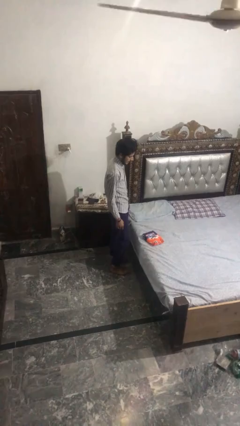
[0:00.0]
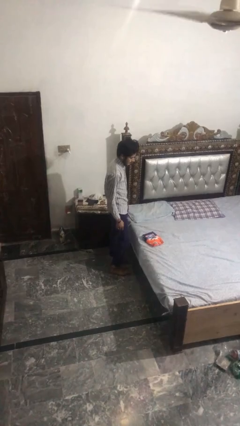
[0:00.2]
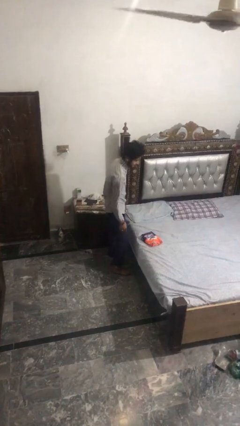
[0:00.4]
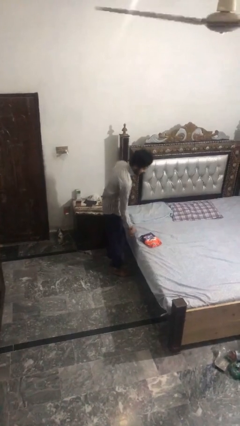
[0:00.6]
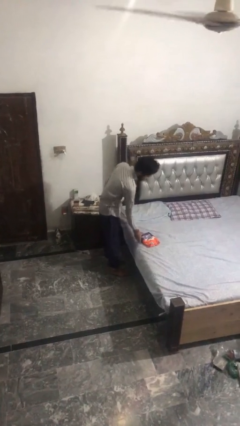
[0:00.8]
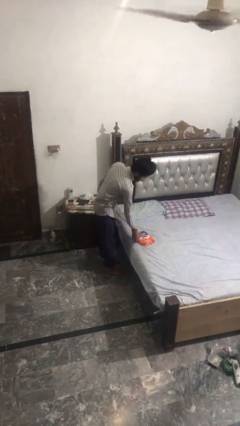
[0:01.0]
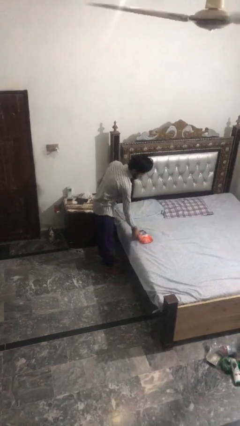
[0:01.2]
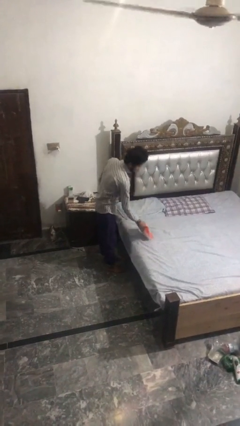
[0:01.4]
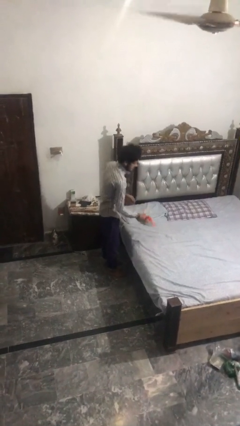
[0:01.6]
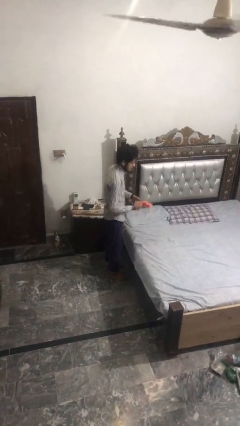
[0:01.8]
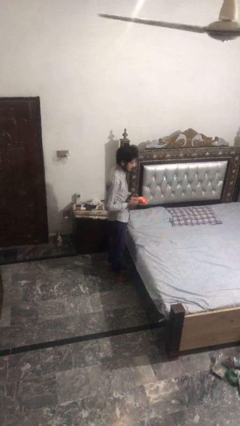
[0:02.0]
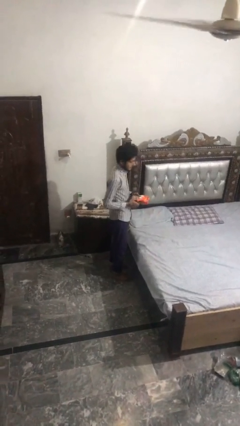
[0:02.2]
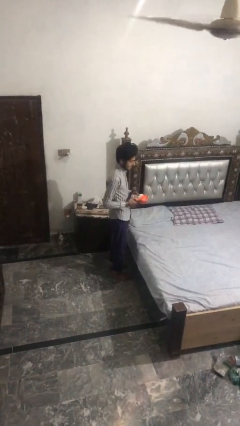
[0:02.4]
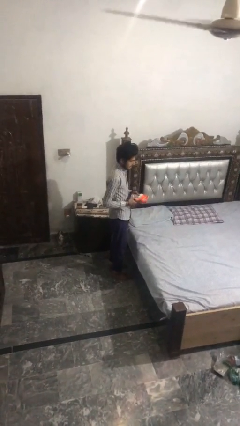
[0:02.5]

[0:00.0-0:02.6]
person picks up object from bed

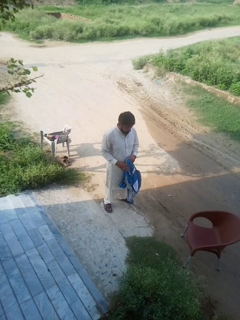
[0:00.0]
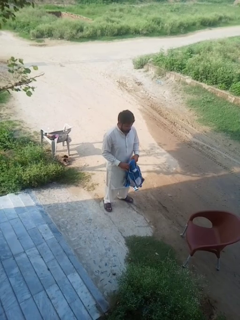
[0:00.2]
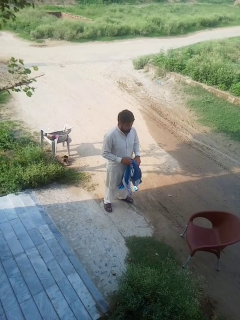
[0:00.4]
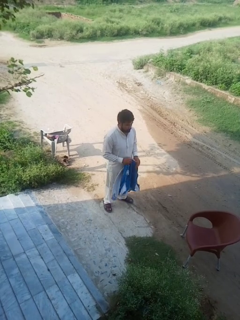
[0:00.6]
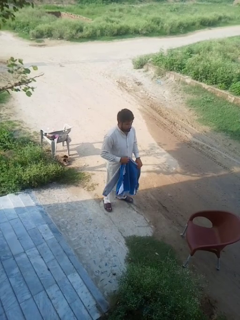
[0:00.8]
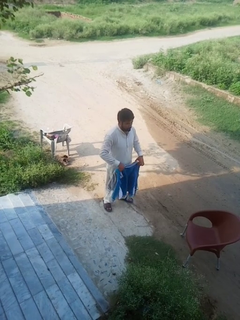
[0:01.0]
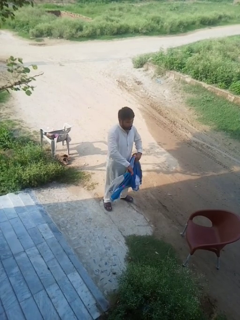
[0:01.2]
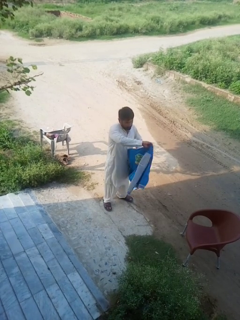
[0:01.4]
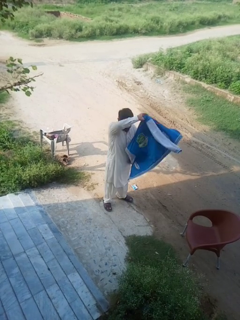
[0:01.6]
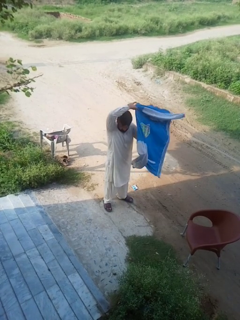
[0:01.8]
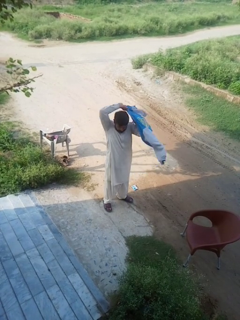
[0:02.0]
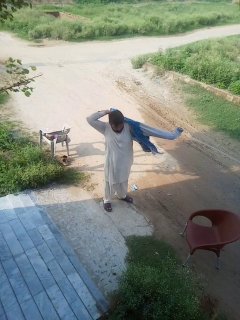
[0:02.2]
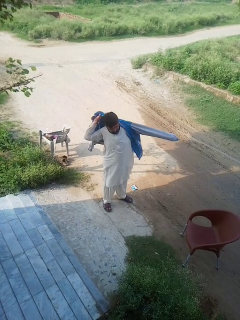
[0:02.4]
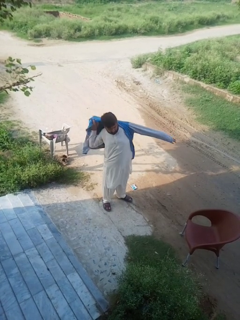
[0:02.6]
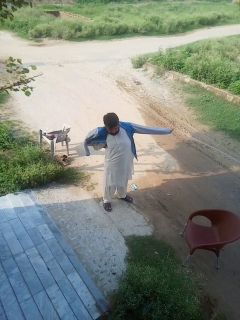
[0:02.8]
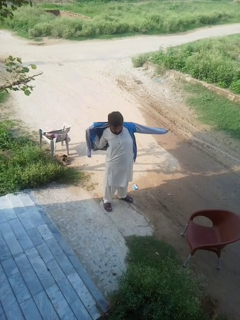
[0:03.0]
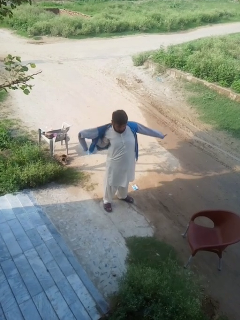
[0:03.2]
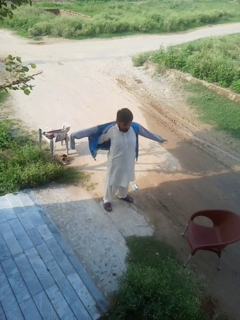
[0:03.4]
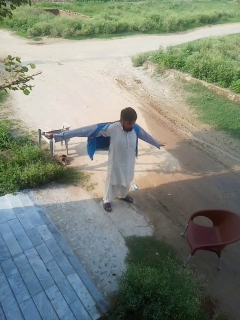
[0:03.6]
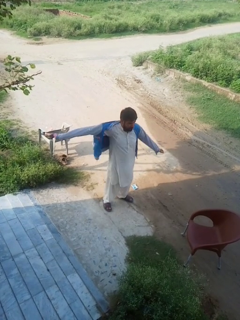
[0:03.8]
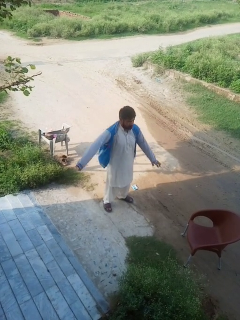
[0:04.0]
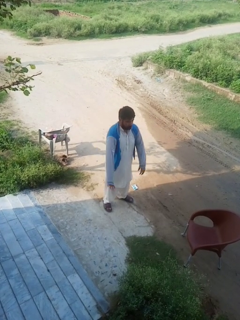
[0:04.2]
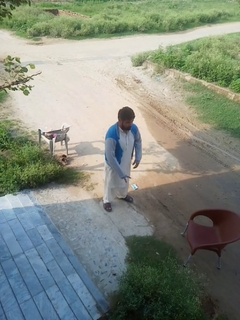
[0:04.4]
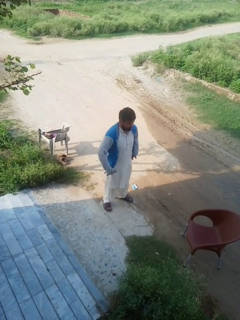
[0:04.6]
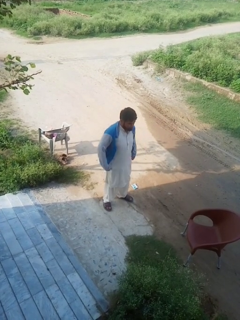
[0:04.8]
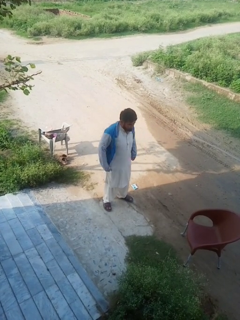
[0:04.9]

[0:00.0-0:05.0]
person puts on jacket

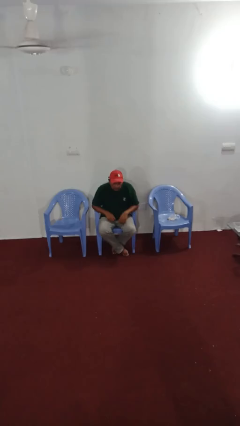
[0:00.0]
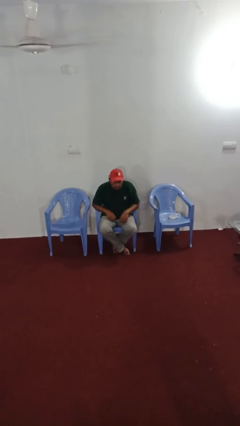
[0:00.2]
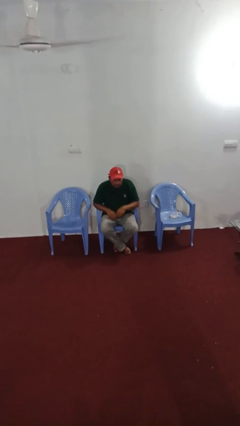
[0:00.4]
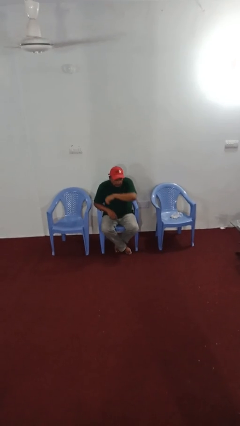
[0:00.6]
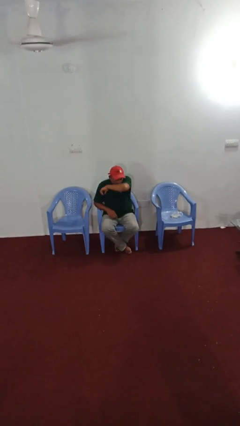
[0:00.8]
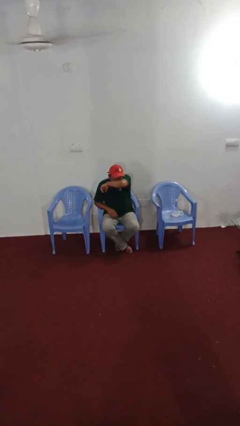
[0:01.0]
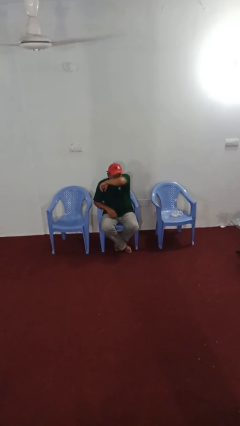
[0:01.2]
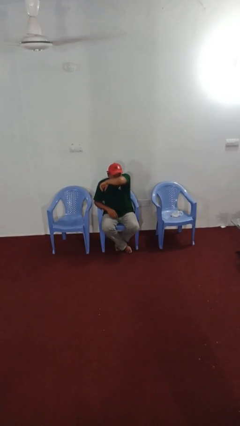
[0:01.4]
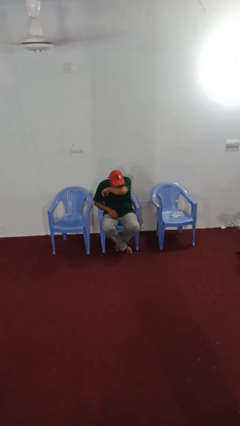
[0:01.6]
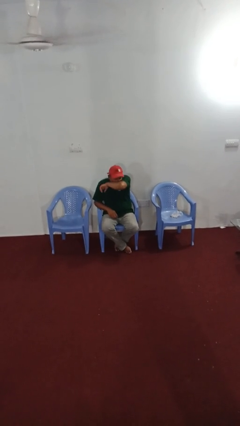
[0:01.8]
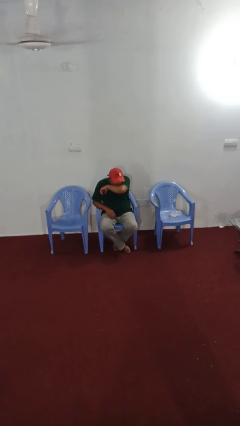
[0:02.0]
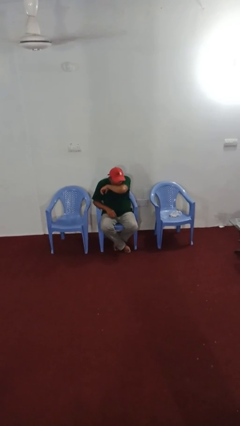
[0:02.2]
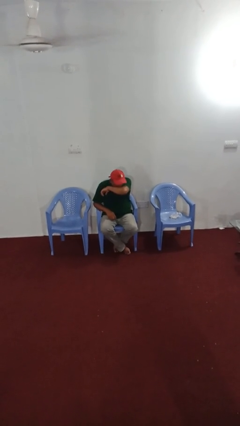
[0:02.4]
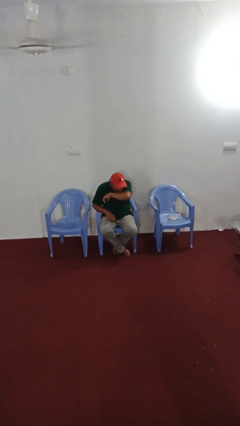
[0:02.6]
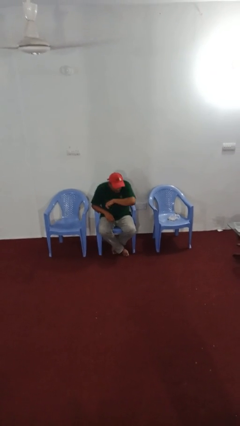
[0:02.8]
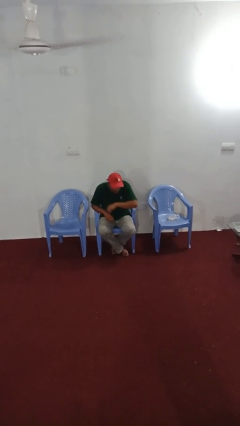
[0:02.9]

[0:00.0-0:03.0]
person sneezes into arm

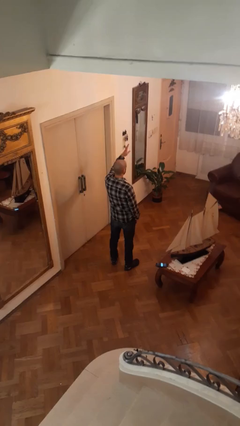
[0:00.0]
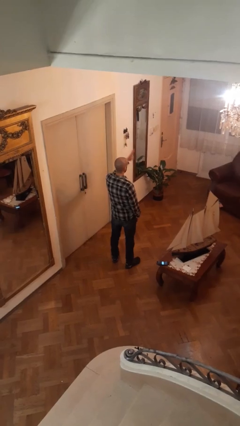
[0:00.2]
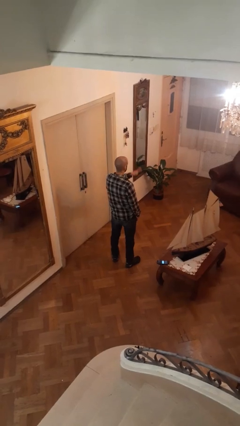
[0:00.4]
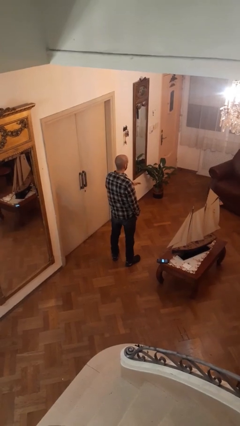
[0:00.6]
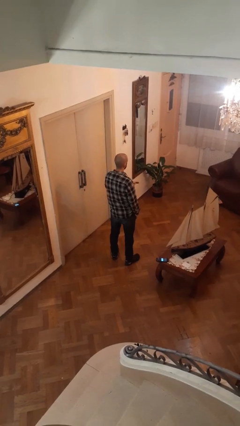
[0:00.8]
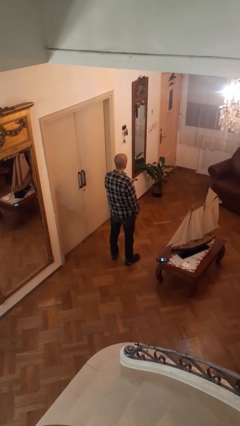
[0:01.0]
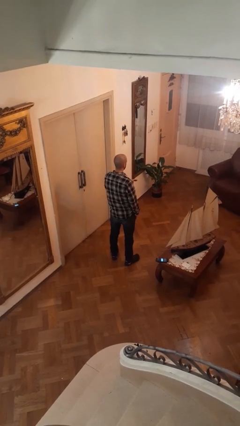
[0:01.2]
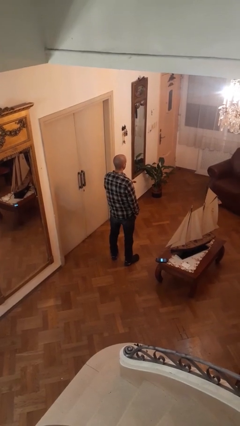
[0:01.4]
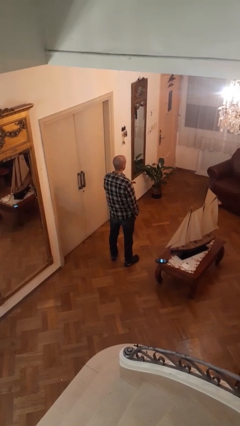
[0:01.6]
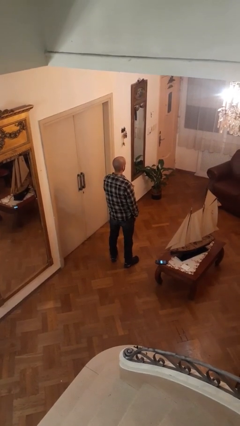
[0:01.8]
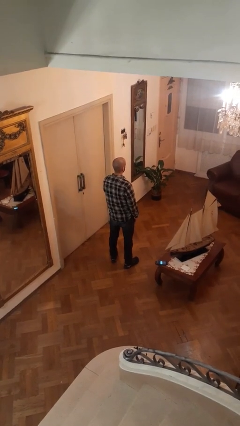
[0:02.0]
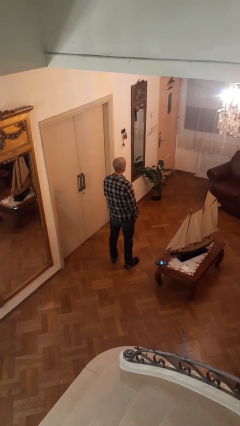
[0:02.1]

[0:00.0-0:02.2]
person gestures swipe down

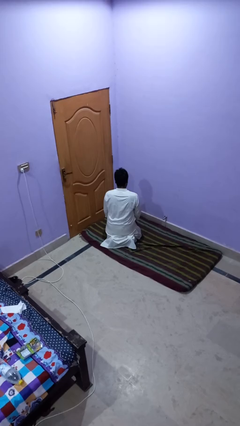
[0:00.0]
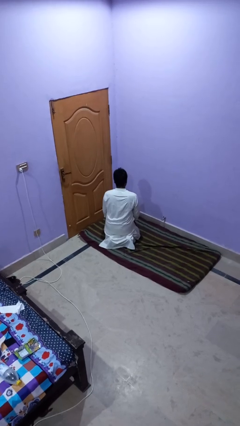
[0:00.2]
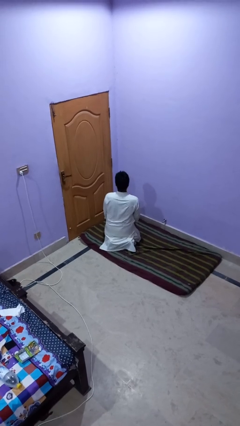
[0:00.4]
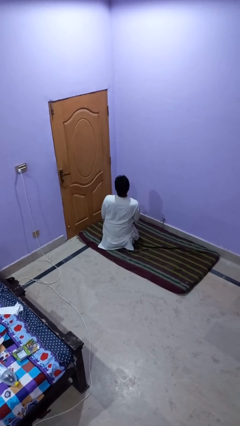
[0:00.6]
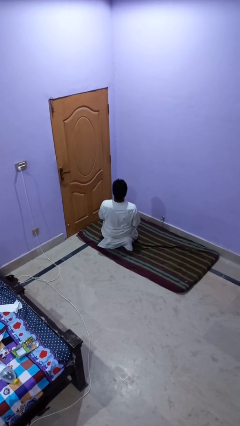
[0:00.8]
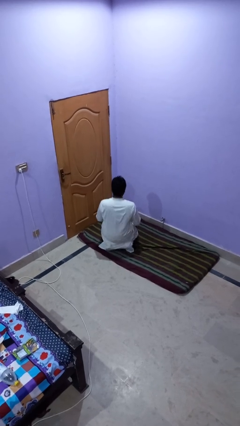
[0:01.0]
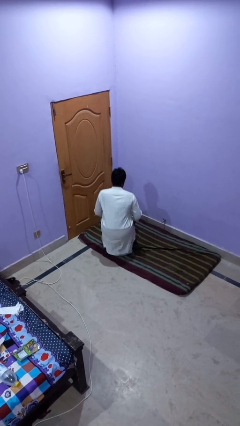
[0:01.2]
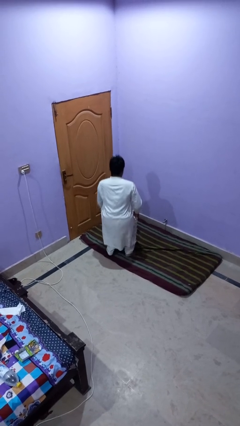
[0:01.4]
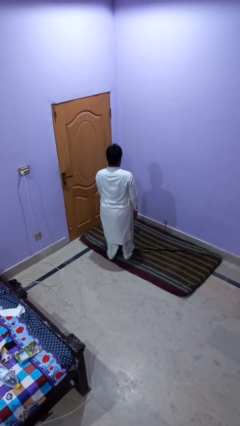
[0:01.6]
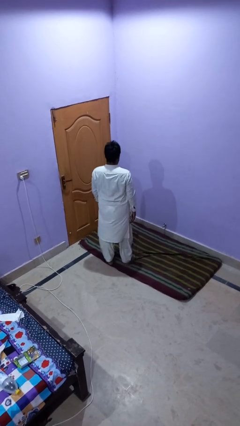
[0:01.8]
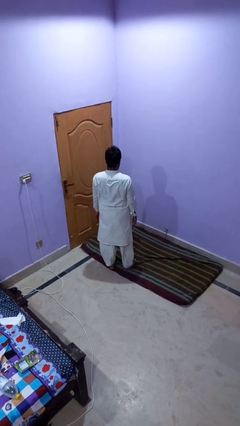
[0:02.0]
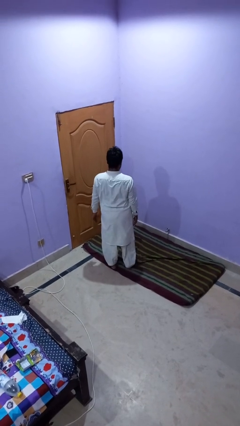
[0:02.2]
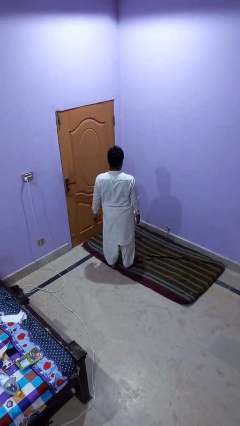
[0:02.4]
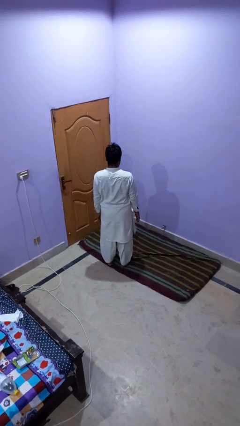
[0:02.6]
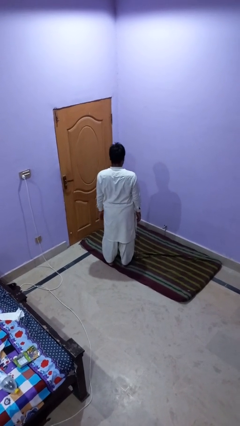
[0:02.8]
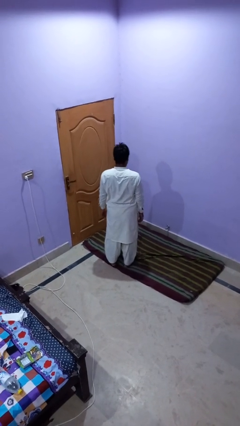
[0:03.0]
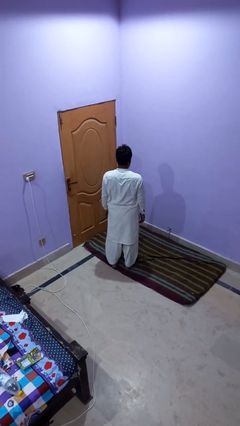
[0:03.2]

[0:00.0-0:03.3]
person stands up from floor

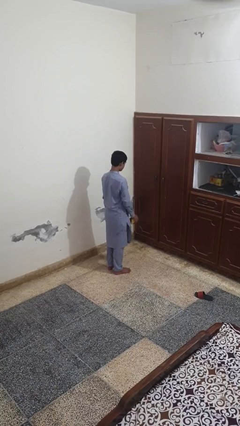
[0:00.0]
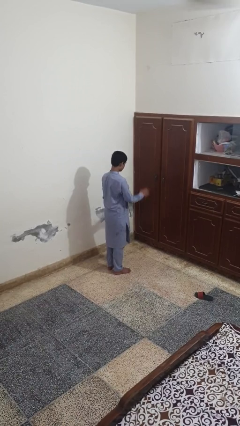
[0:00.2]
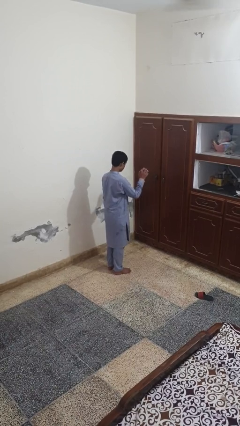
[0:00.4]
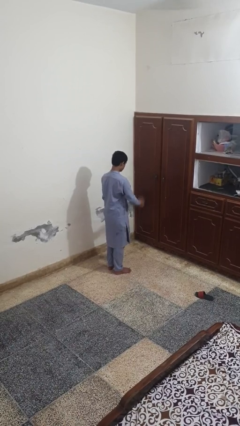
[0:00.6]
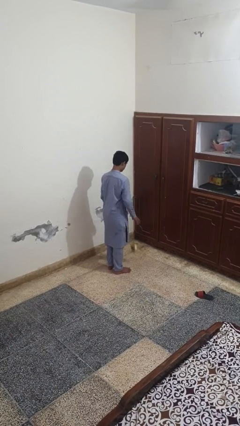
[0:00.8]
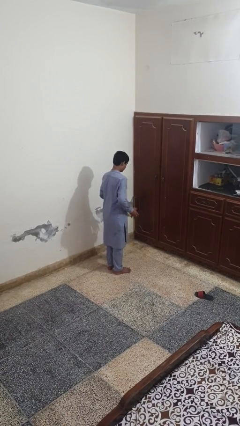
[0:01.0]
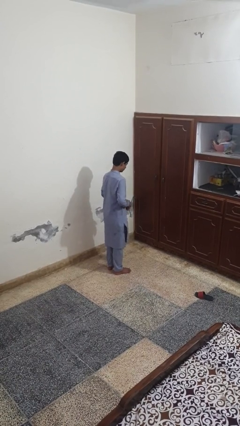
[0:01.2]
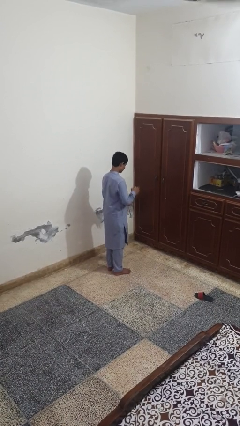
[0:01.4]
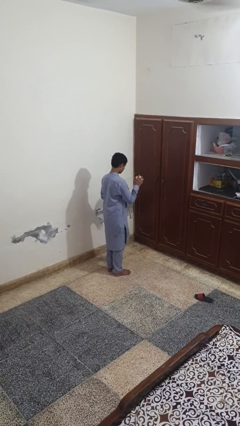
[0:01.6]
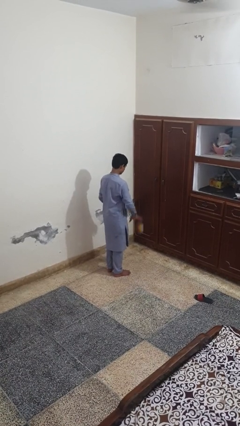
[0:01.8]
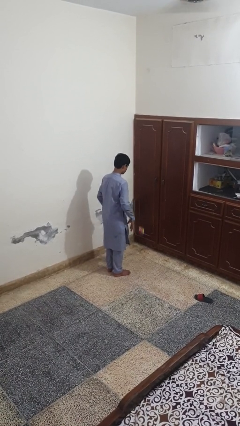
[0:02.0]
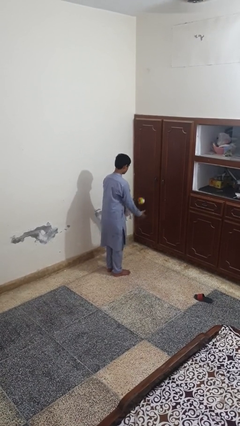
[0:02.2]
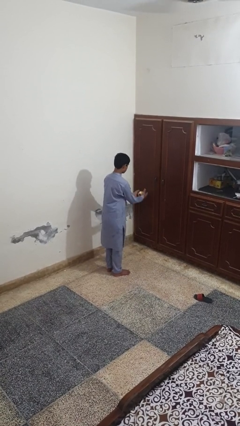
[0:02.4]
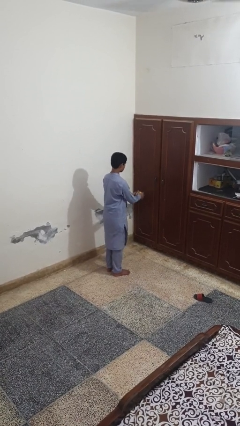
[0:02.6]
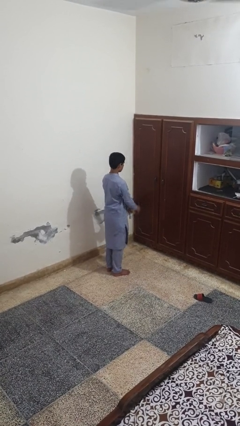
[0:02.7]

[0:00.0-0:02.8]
person bounces ball on floor
